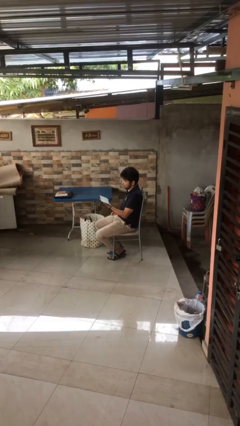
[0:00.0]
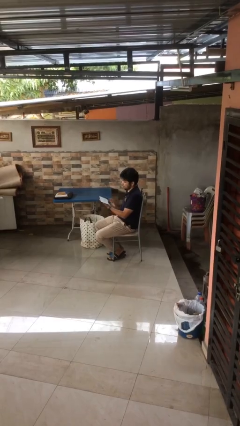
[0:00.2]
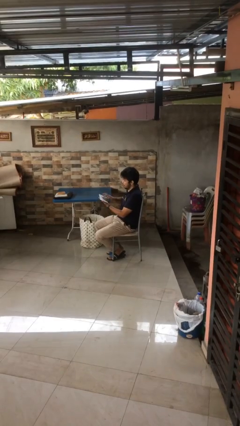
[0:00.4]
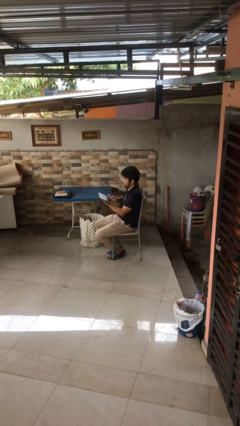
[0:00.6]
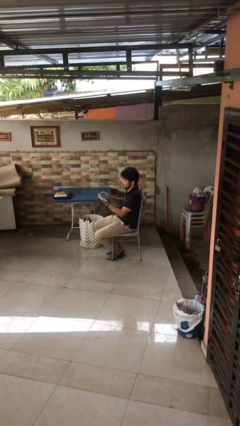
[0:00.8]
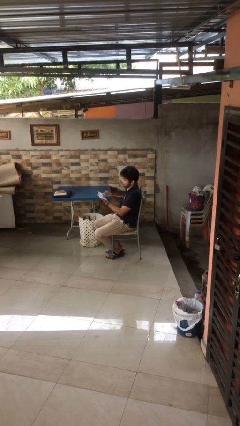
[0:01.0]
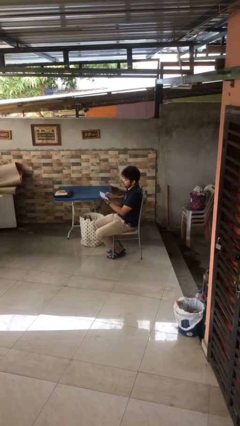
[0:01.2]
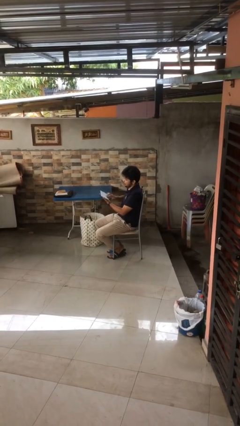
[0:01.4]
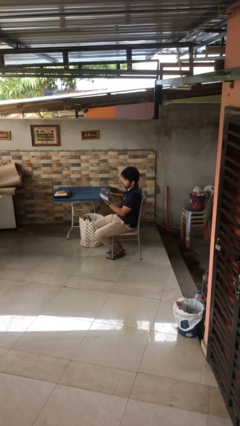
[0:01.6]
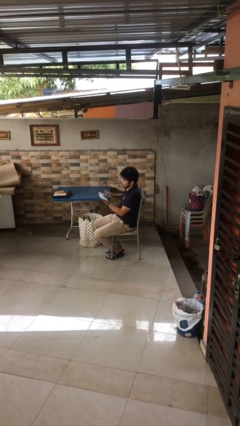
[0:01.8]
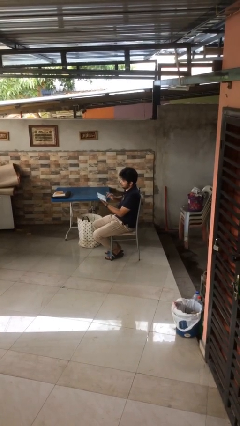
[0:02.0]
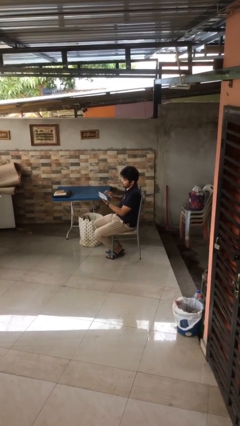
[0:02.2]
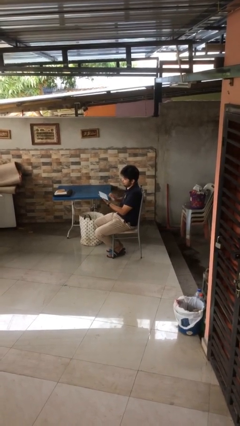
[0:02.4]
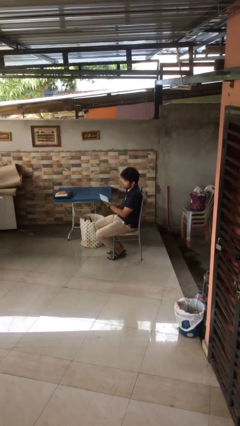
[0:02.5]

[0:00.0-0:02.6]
person interacts with tablet

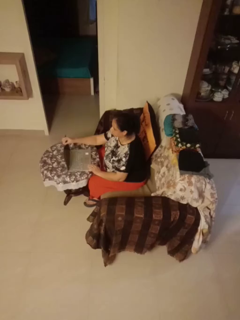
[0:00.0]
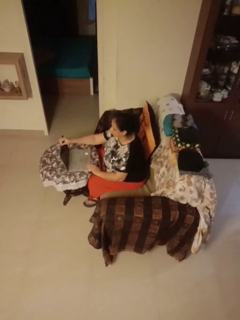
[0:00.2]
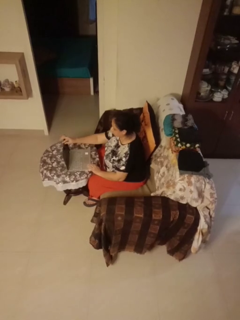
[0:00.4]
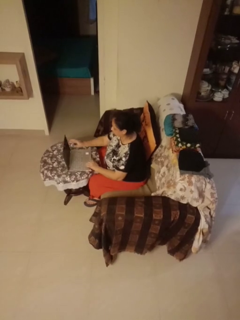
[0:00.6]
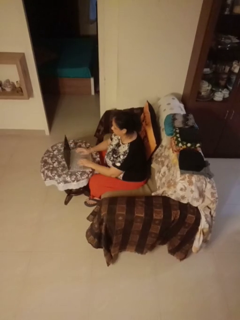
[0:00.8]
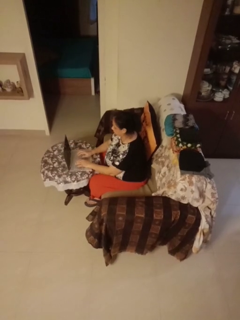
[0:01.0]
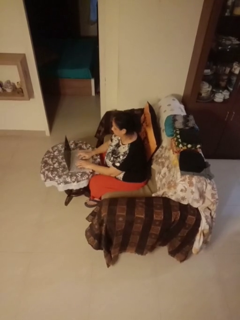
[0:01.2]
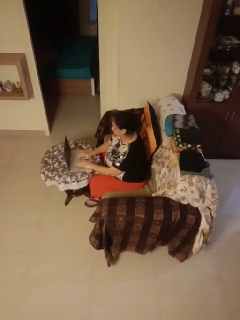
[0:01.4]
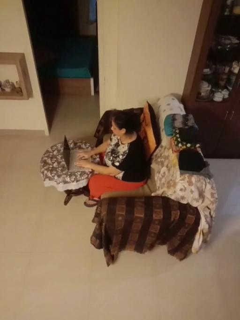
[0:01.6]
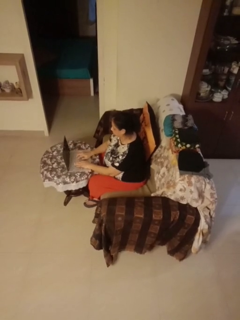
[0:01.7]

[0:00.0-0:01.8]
person opens laptop

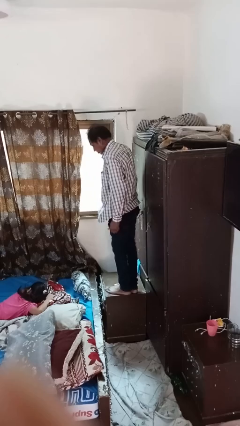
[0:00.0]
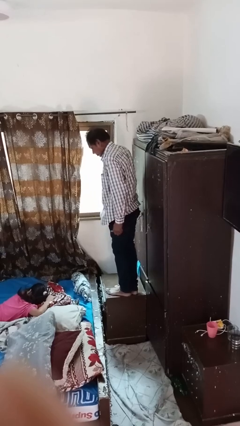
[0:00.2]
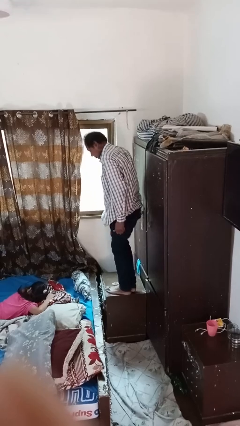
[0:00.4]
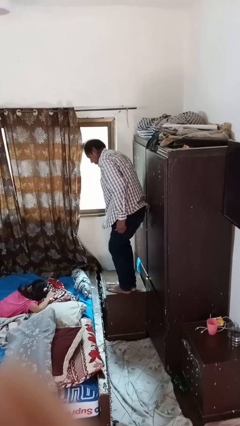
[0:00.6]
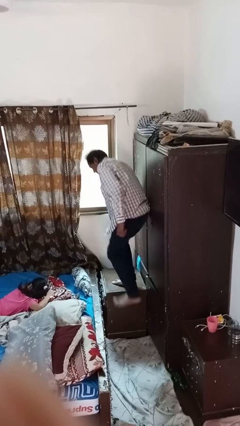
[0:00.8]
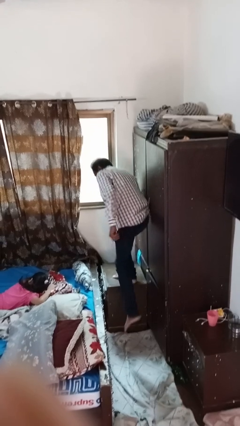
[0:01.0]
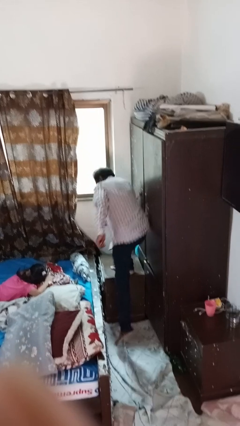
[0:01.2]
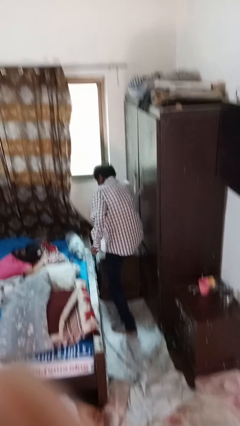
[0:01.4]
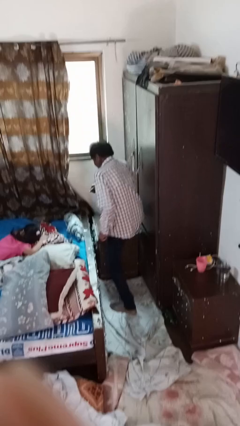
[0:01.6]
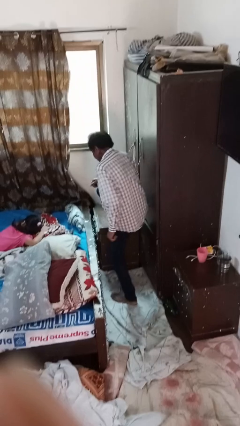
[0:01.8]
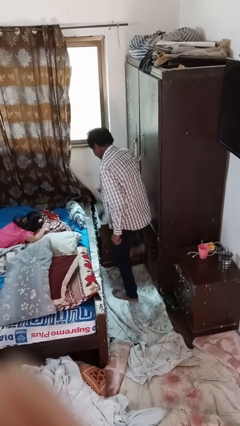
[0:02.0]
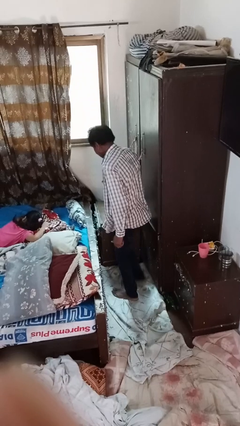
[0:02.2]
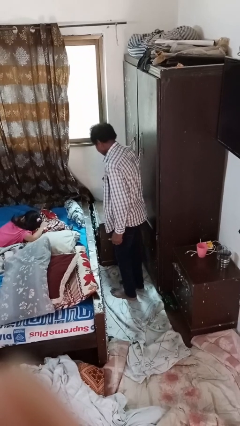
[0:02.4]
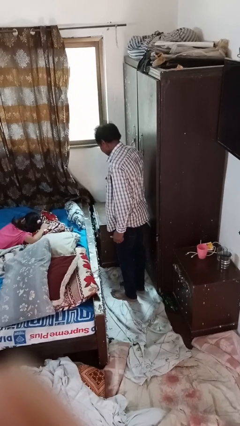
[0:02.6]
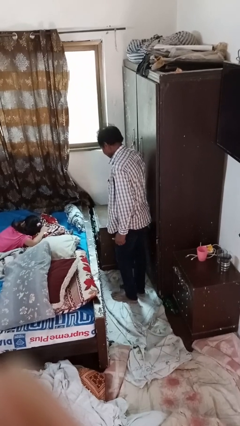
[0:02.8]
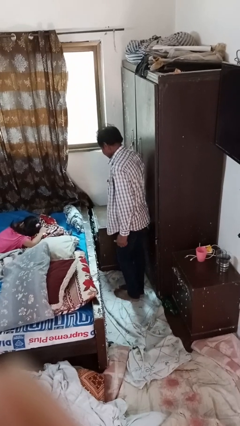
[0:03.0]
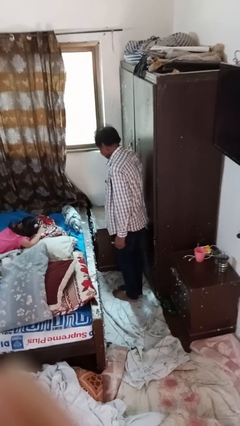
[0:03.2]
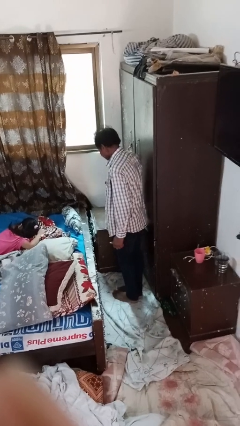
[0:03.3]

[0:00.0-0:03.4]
person climbs off table

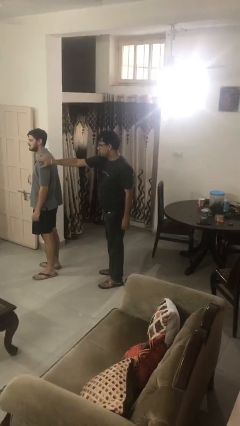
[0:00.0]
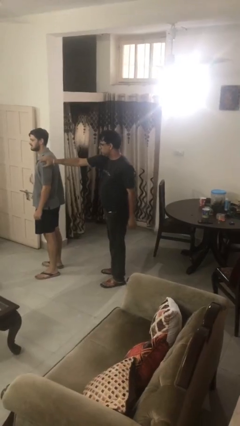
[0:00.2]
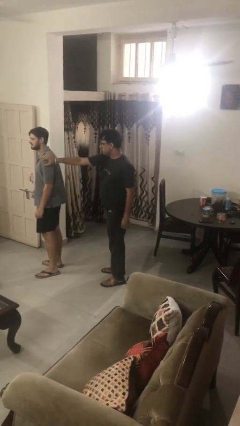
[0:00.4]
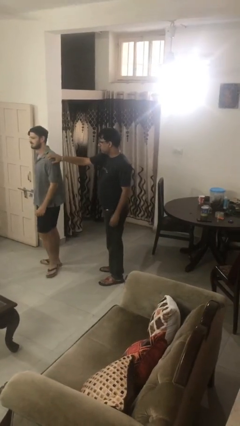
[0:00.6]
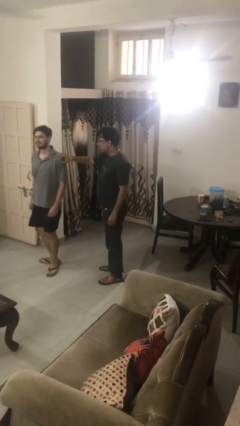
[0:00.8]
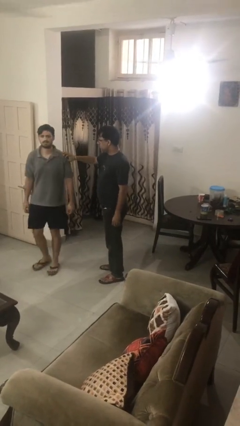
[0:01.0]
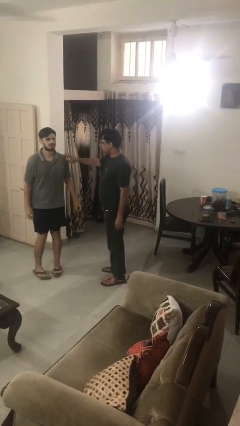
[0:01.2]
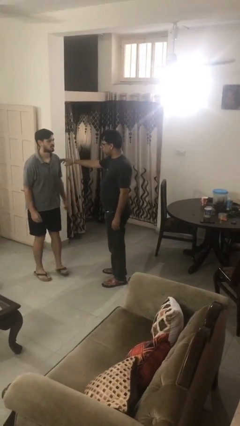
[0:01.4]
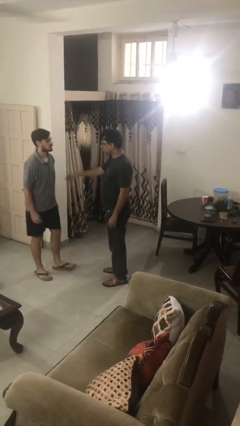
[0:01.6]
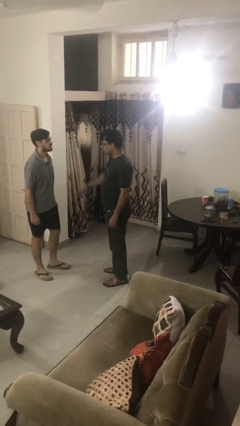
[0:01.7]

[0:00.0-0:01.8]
person spins person around

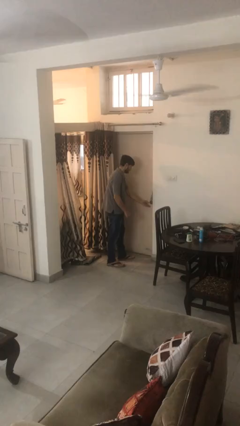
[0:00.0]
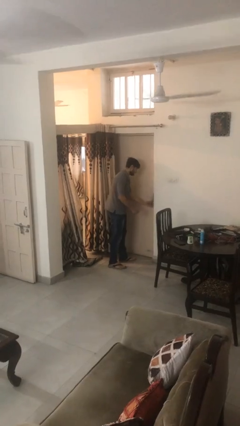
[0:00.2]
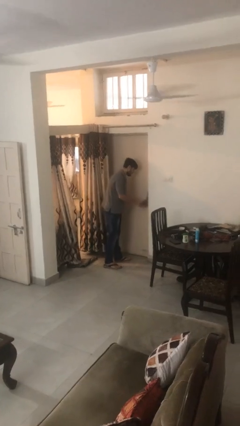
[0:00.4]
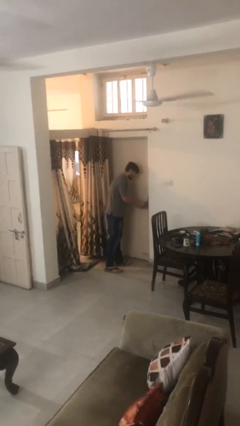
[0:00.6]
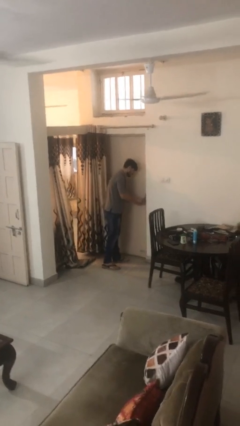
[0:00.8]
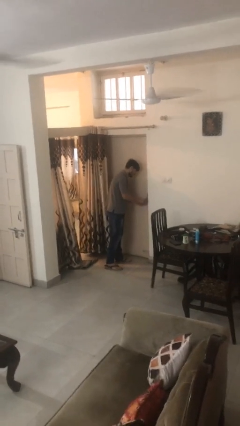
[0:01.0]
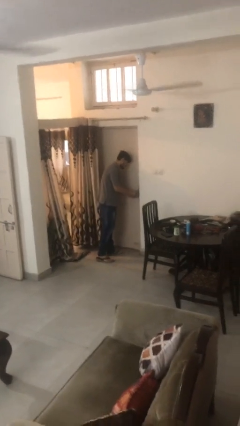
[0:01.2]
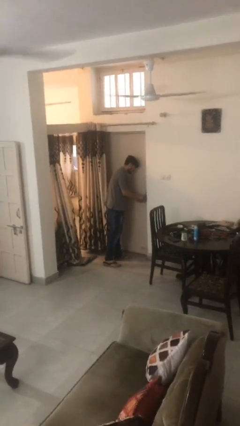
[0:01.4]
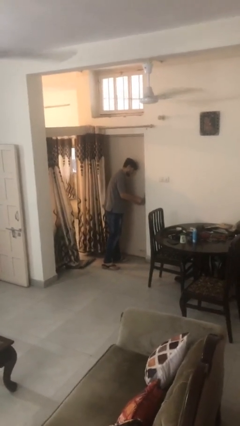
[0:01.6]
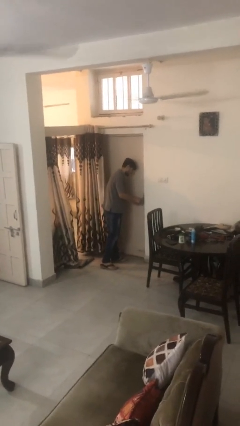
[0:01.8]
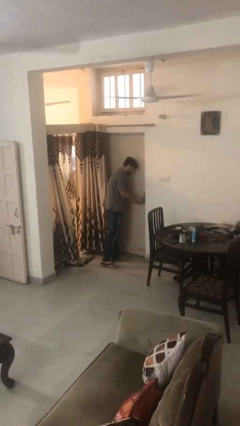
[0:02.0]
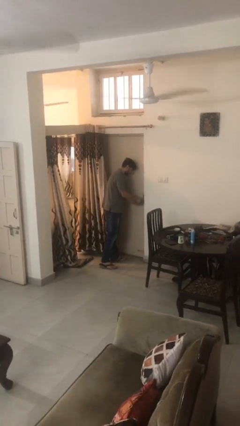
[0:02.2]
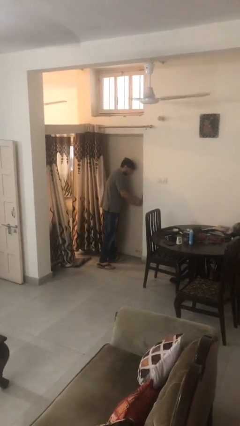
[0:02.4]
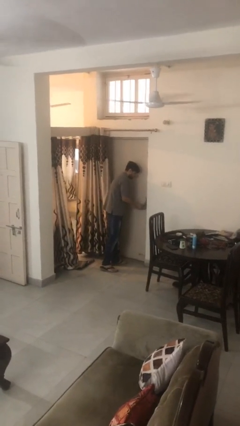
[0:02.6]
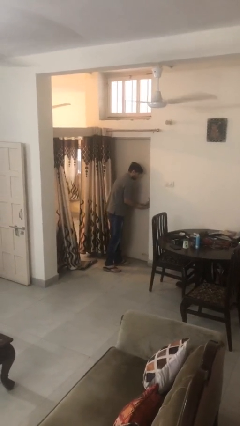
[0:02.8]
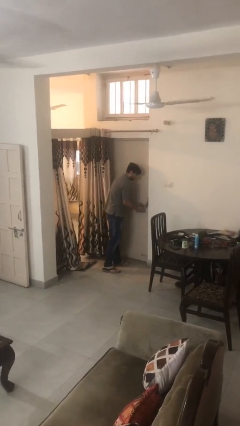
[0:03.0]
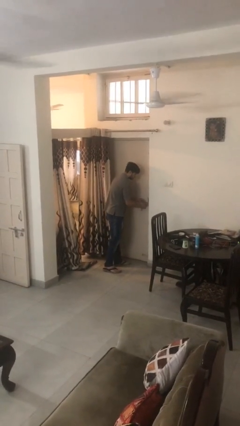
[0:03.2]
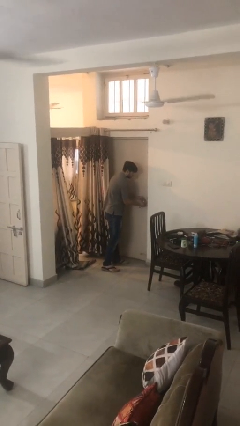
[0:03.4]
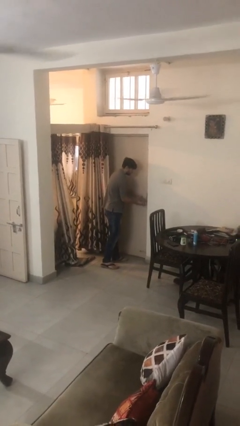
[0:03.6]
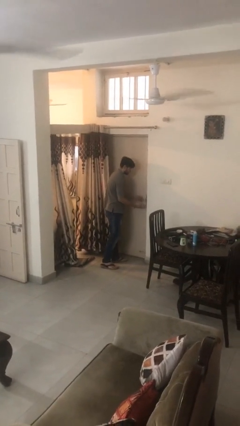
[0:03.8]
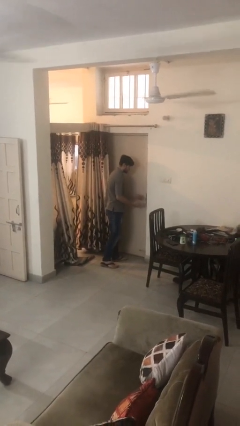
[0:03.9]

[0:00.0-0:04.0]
person unlocks door with keys

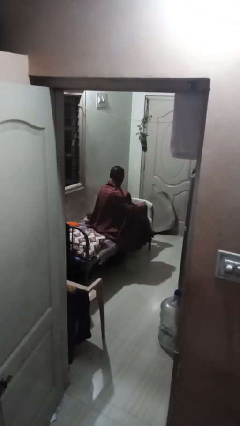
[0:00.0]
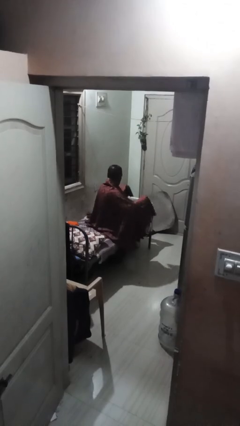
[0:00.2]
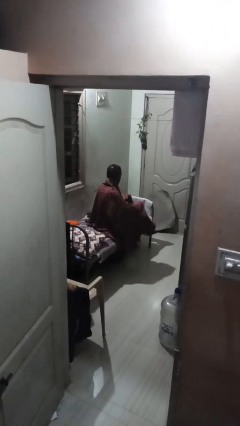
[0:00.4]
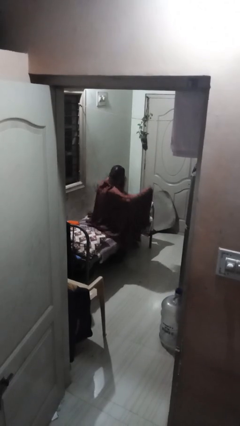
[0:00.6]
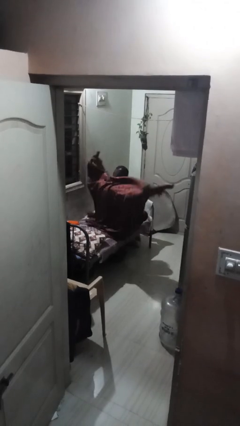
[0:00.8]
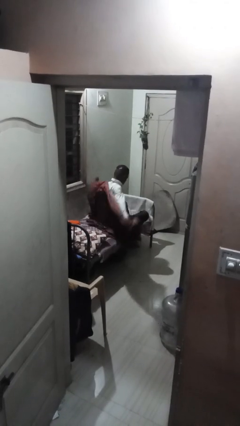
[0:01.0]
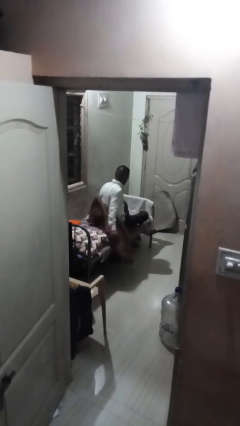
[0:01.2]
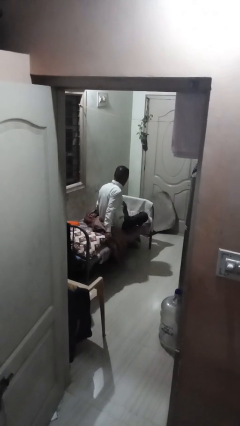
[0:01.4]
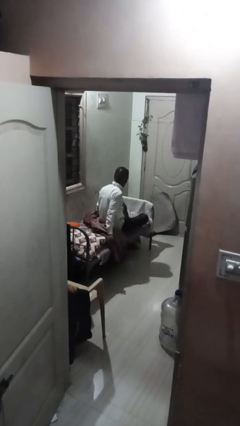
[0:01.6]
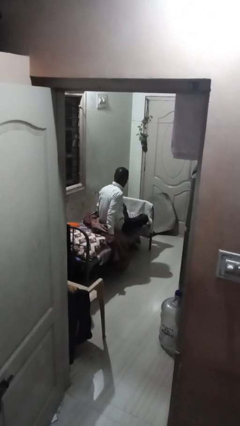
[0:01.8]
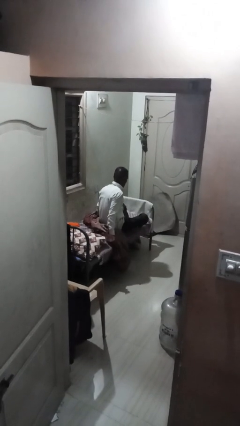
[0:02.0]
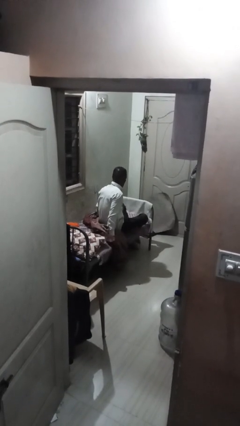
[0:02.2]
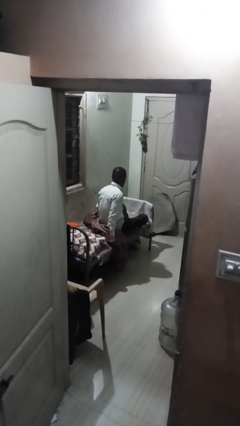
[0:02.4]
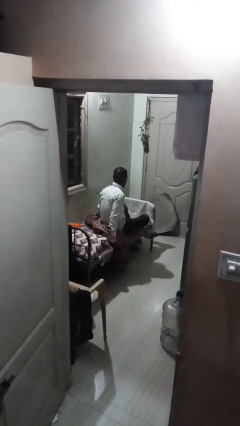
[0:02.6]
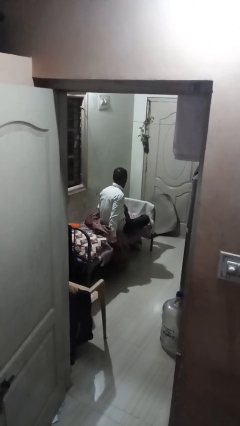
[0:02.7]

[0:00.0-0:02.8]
person uncovers with blanket

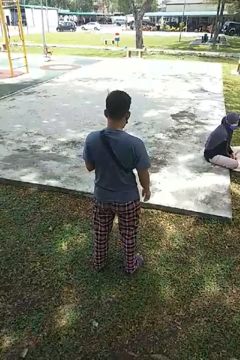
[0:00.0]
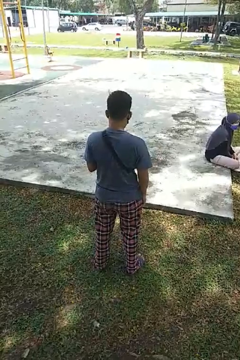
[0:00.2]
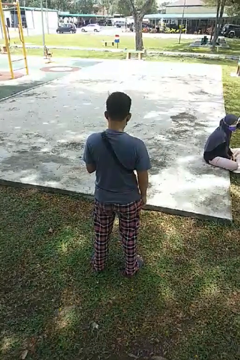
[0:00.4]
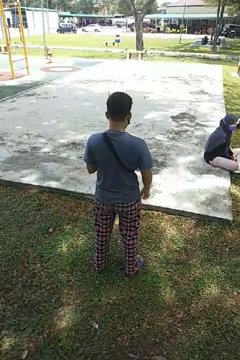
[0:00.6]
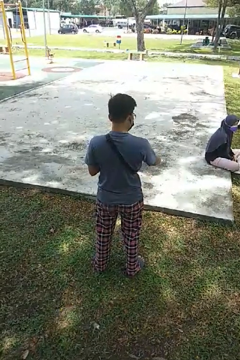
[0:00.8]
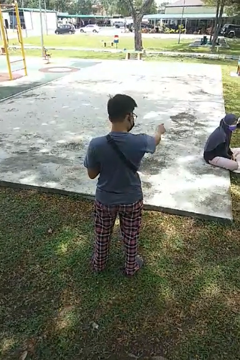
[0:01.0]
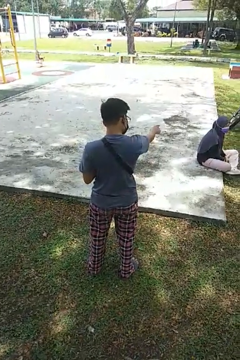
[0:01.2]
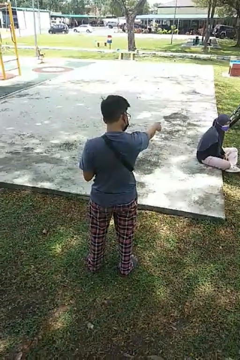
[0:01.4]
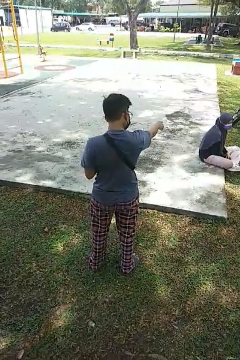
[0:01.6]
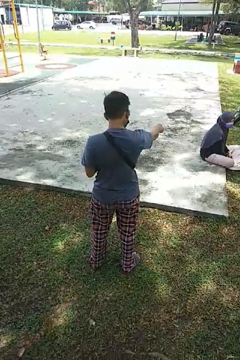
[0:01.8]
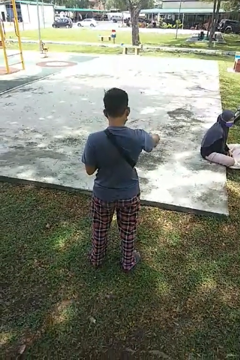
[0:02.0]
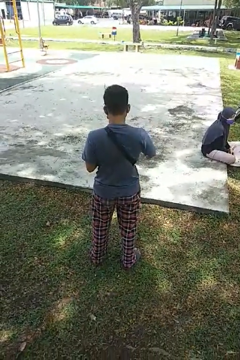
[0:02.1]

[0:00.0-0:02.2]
person points at person
